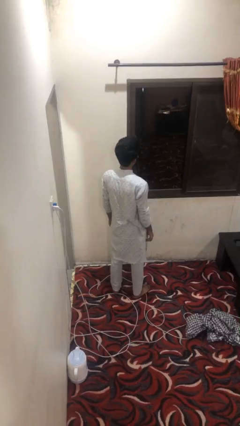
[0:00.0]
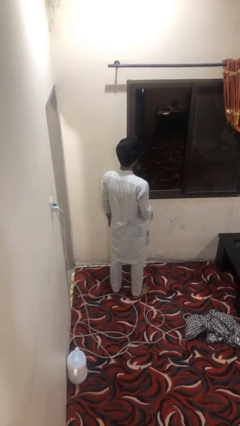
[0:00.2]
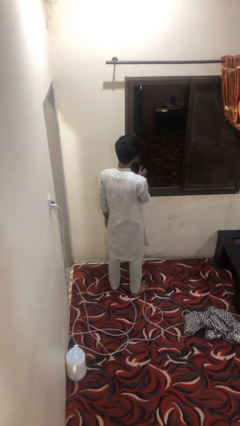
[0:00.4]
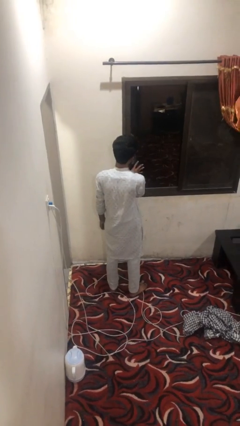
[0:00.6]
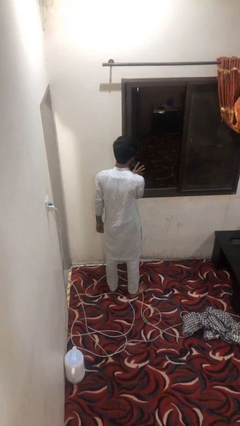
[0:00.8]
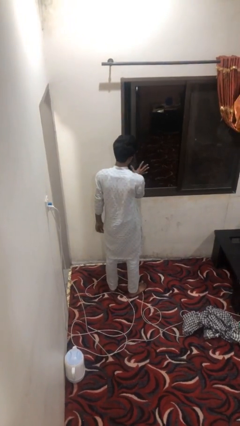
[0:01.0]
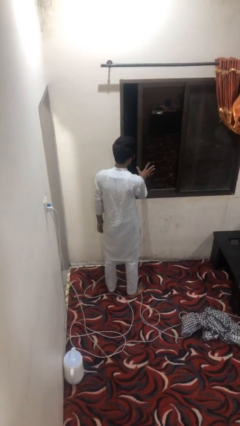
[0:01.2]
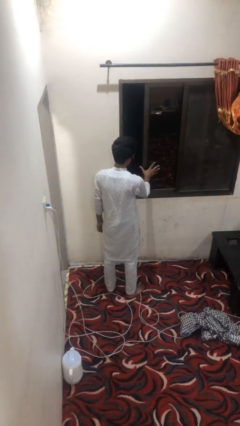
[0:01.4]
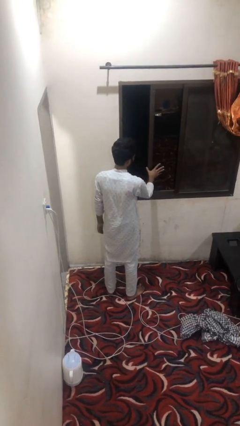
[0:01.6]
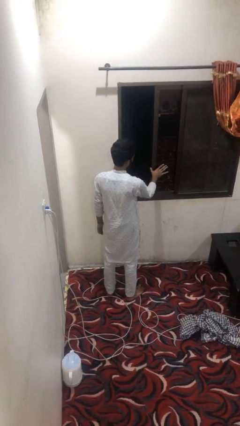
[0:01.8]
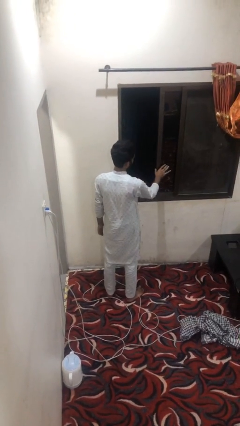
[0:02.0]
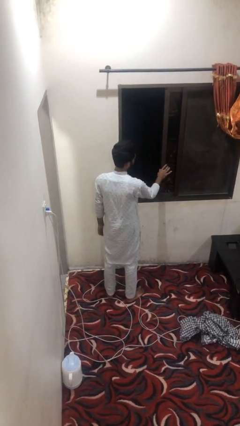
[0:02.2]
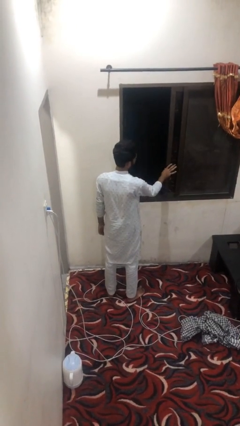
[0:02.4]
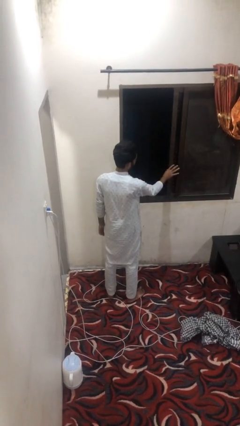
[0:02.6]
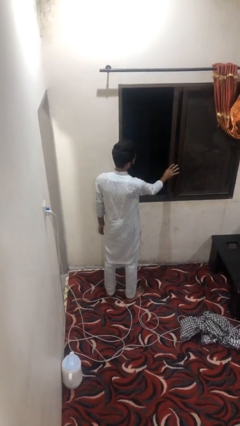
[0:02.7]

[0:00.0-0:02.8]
person opens home window

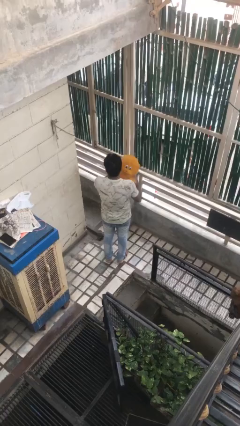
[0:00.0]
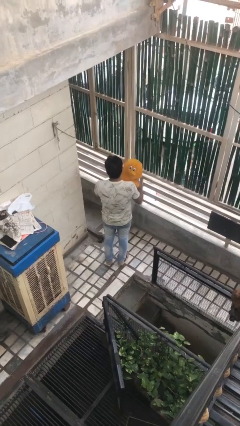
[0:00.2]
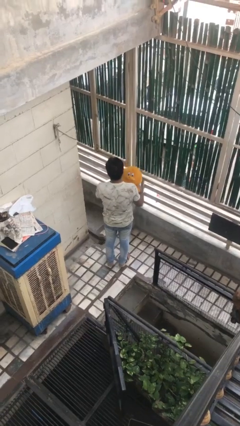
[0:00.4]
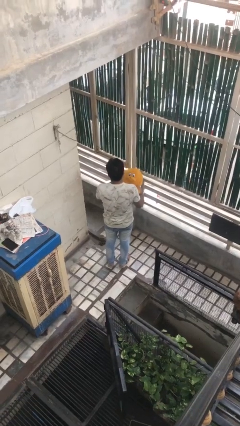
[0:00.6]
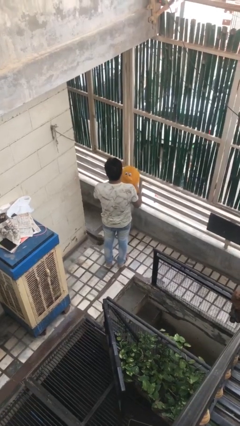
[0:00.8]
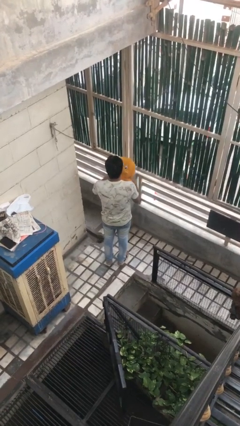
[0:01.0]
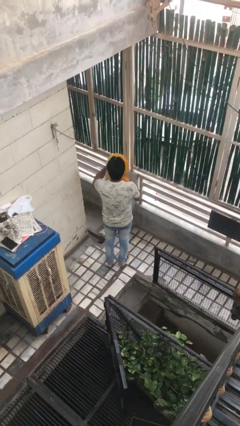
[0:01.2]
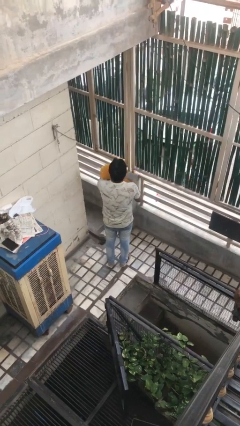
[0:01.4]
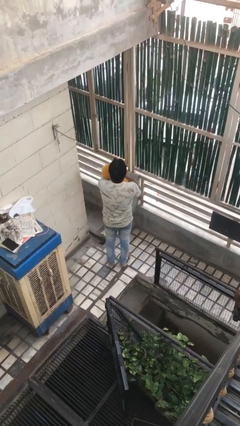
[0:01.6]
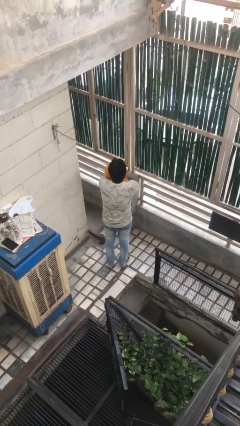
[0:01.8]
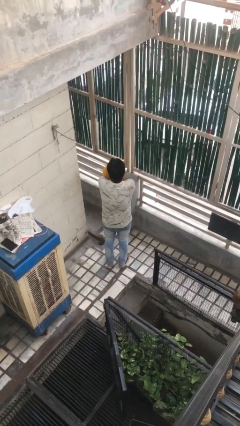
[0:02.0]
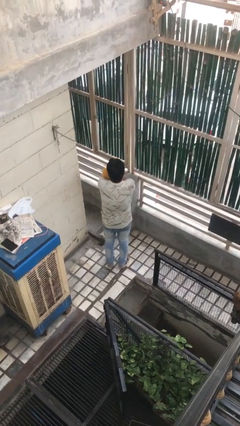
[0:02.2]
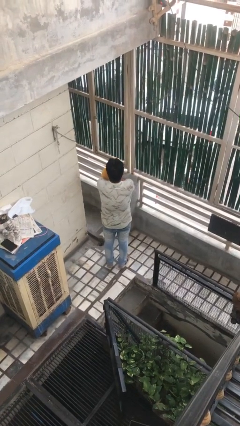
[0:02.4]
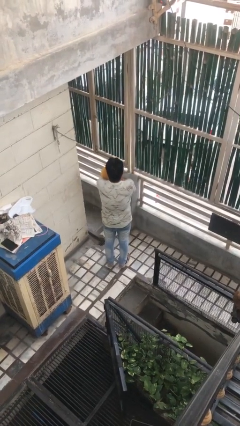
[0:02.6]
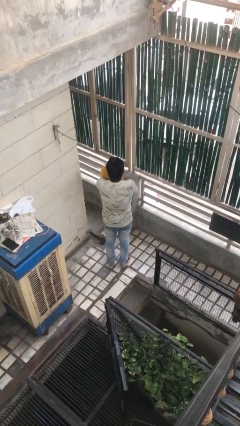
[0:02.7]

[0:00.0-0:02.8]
person hugs stuffed animal

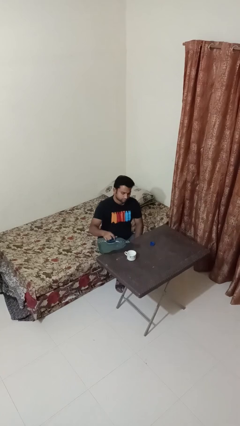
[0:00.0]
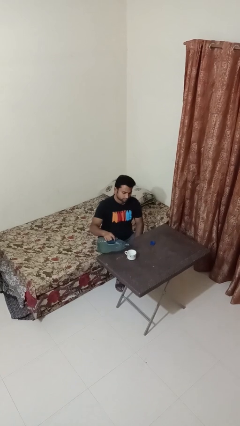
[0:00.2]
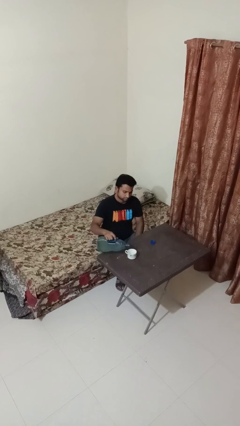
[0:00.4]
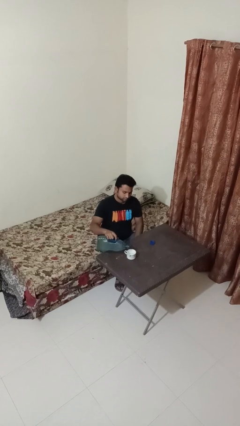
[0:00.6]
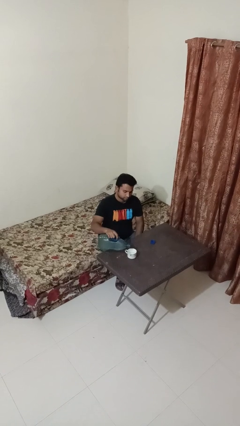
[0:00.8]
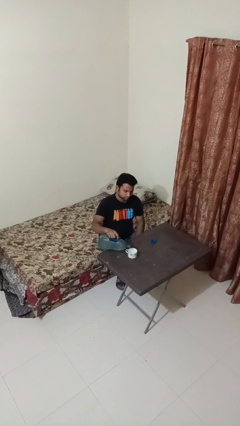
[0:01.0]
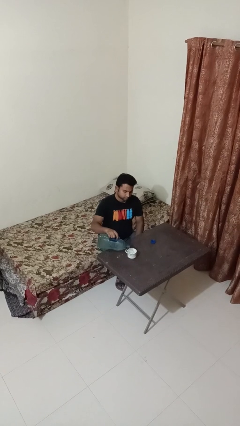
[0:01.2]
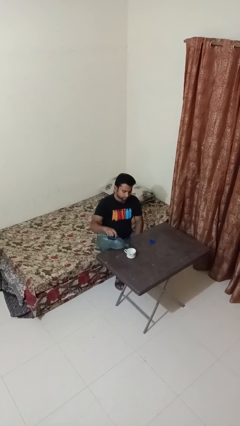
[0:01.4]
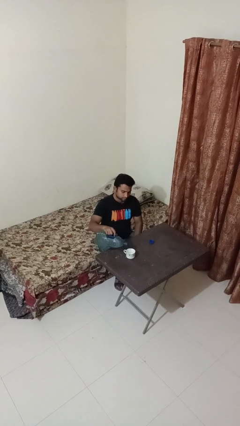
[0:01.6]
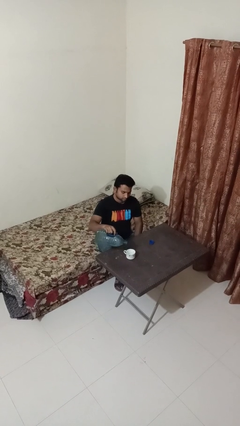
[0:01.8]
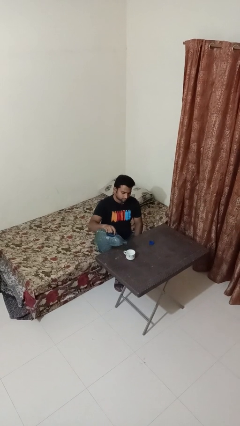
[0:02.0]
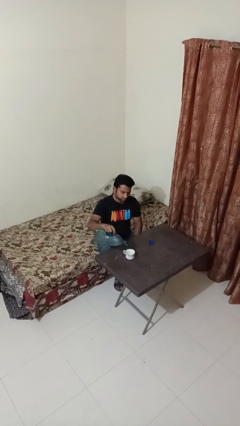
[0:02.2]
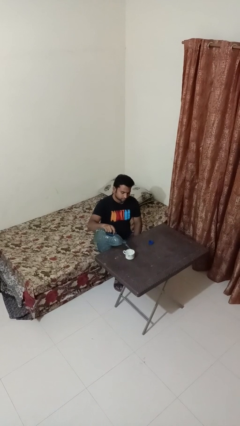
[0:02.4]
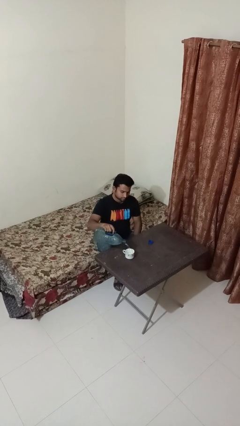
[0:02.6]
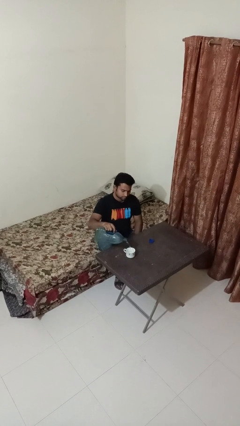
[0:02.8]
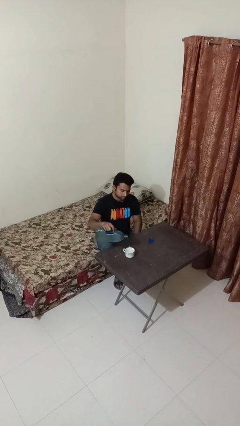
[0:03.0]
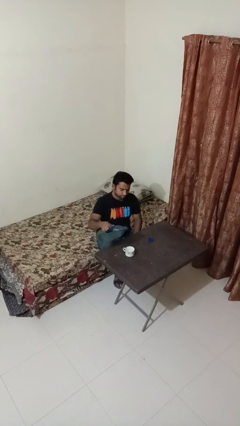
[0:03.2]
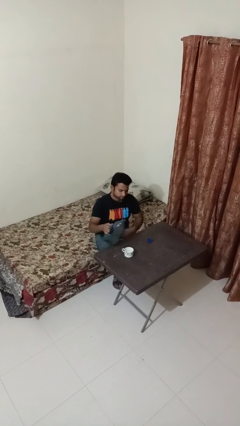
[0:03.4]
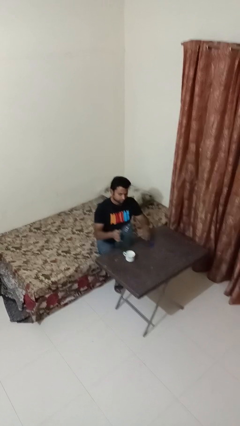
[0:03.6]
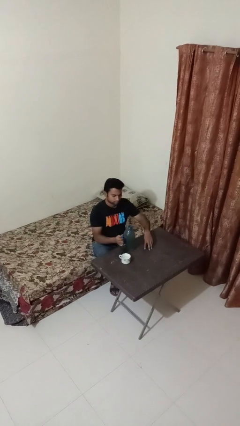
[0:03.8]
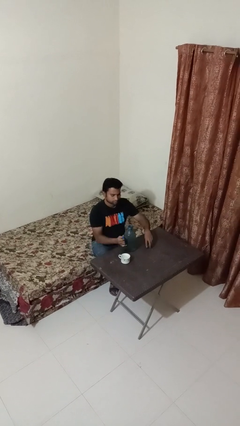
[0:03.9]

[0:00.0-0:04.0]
person pours liquid into cup

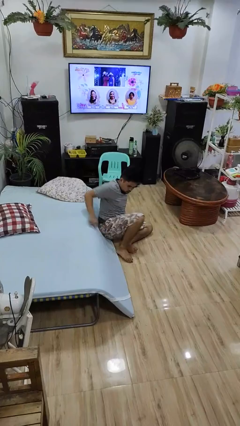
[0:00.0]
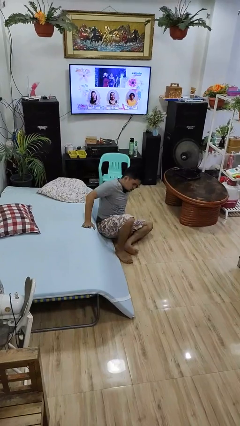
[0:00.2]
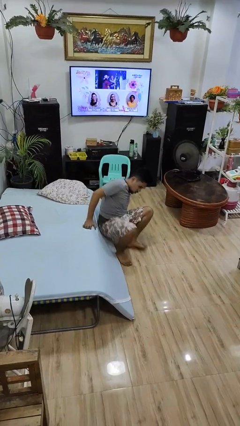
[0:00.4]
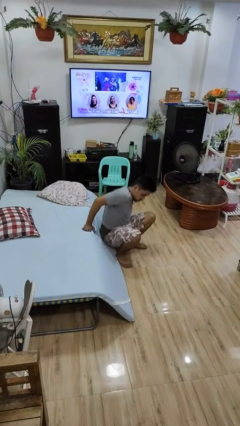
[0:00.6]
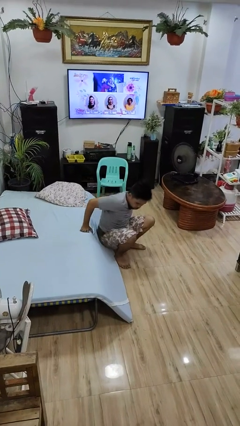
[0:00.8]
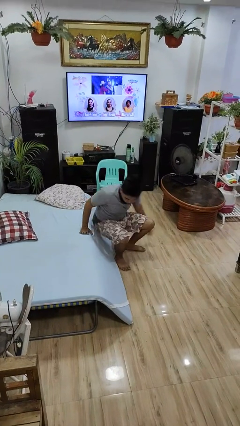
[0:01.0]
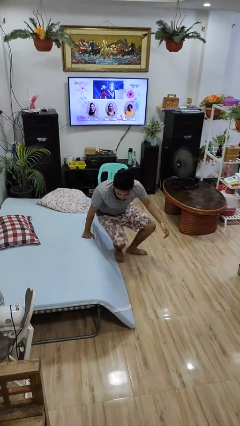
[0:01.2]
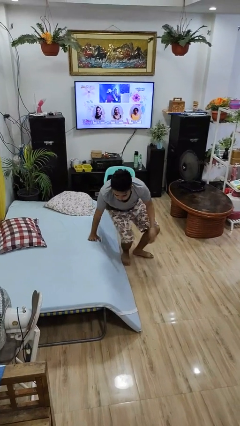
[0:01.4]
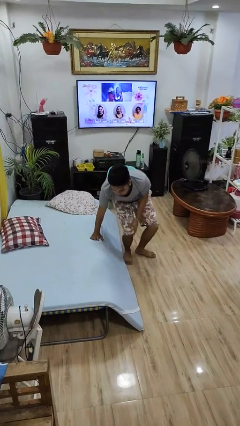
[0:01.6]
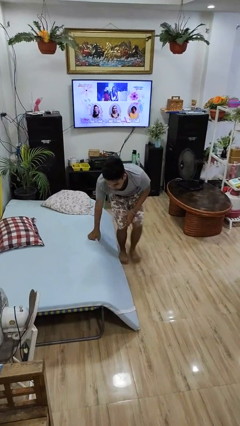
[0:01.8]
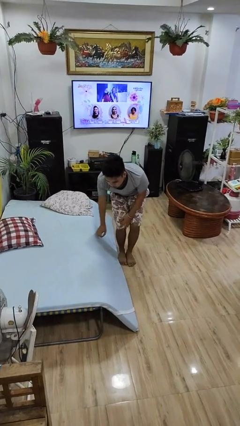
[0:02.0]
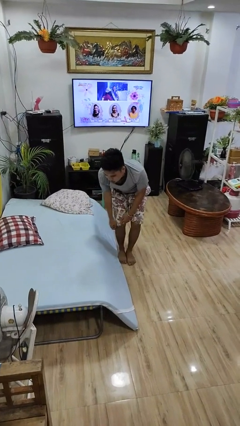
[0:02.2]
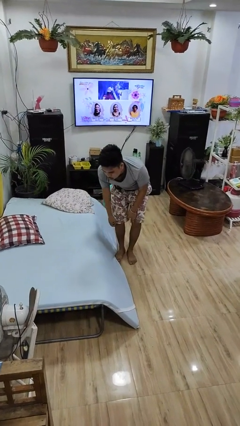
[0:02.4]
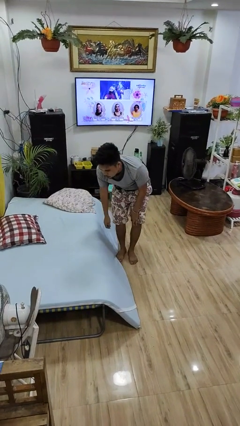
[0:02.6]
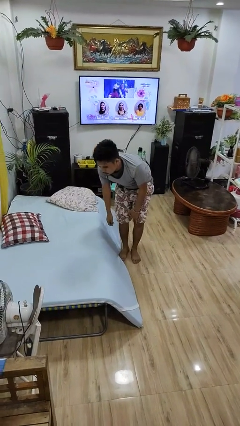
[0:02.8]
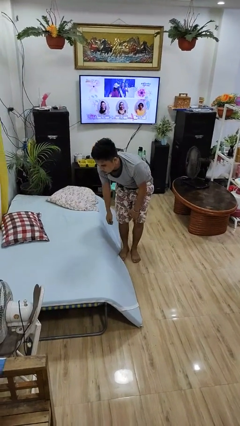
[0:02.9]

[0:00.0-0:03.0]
person stands up from floor

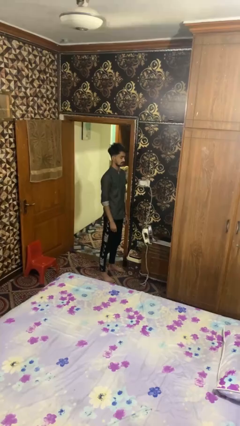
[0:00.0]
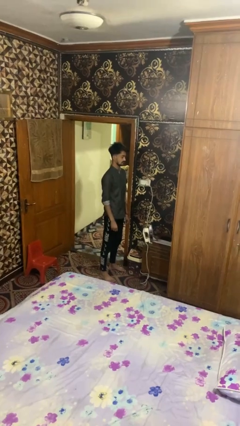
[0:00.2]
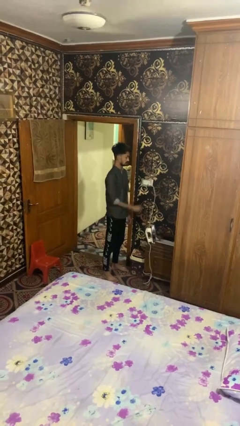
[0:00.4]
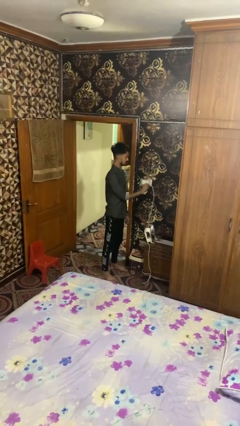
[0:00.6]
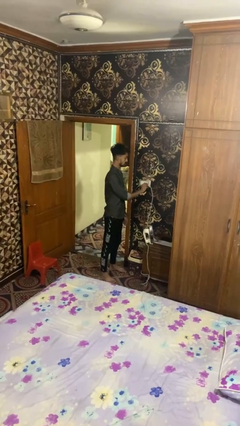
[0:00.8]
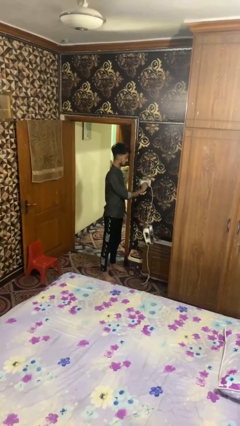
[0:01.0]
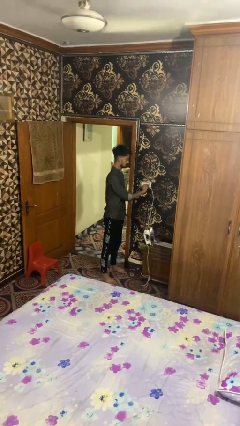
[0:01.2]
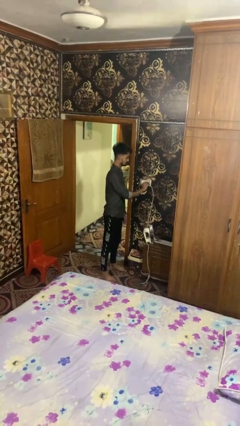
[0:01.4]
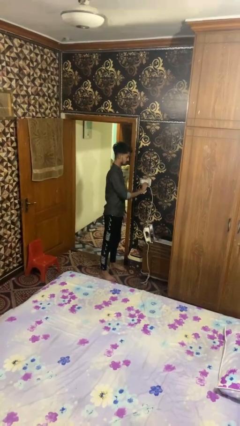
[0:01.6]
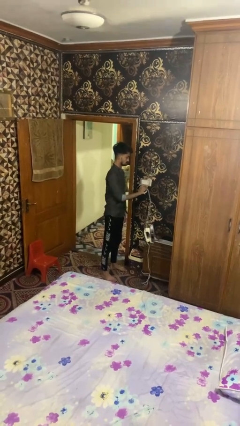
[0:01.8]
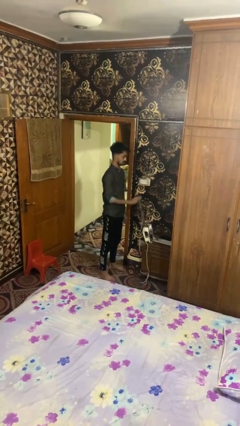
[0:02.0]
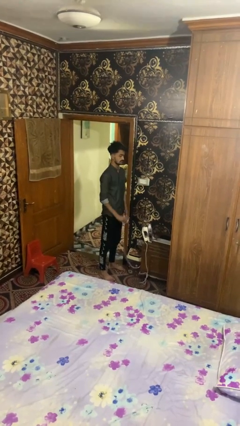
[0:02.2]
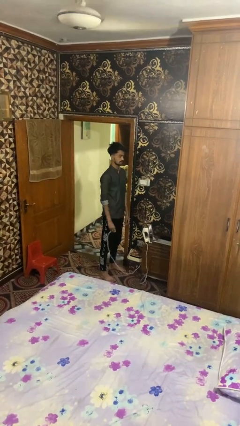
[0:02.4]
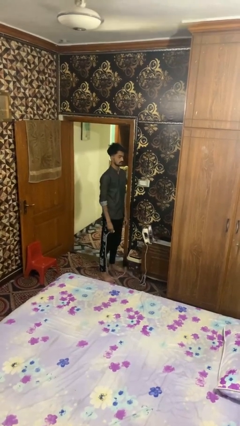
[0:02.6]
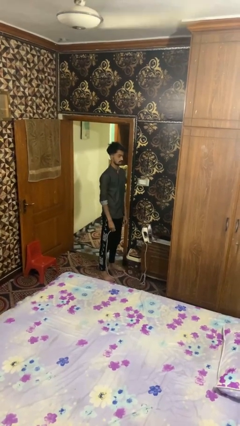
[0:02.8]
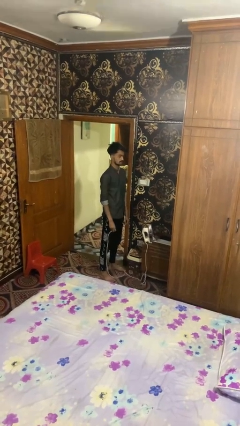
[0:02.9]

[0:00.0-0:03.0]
person unplugs from electrical socket

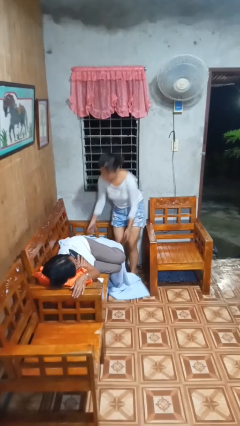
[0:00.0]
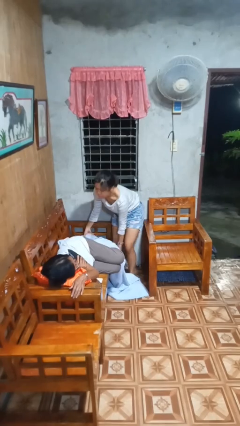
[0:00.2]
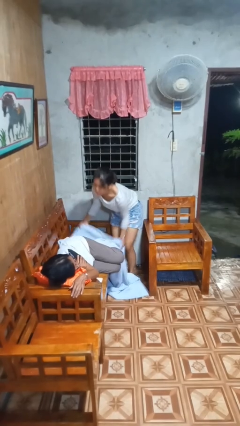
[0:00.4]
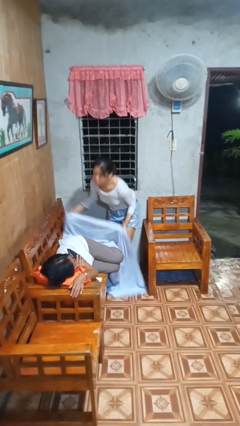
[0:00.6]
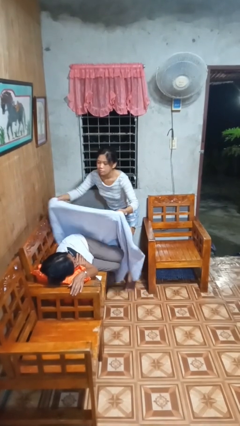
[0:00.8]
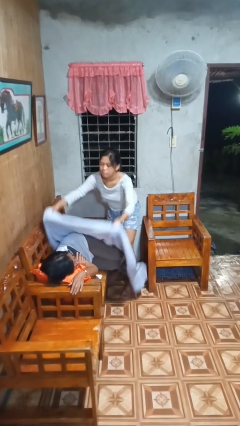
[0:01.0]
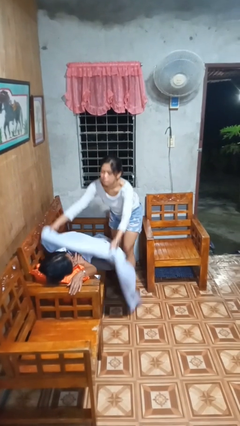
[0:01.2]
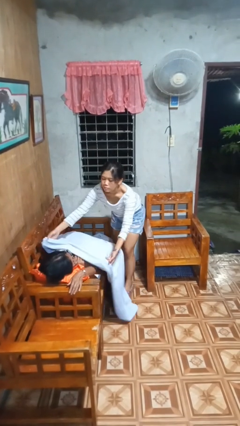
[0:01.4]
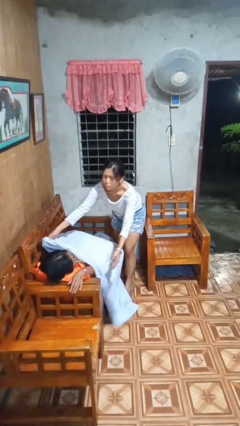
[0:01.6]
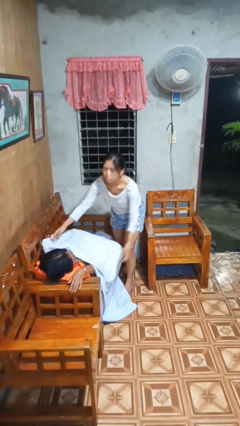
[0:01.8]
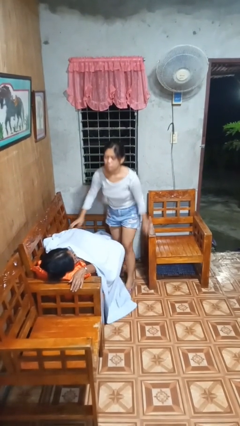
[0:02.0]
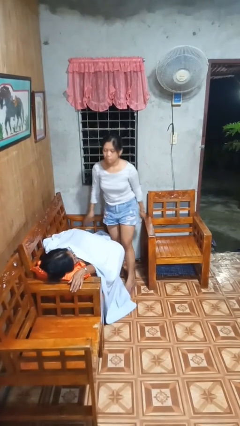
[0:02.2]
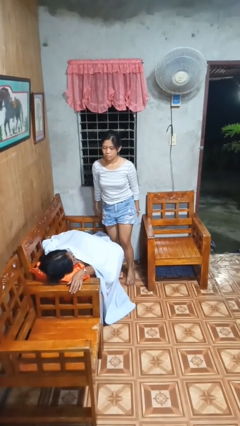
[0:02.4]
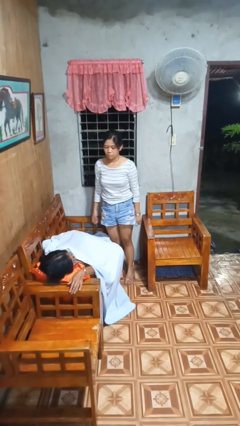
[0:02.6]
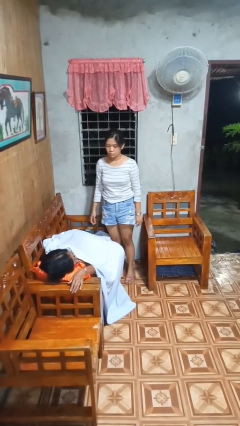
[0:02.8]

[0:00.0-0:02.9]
person covers friend with blanket
